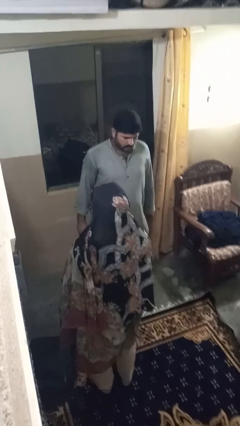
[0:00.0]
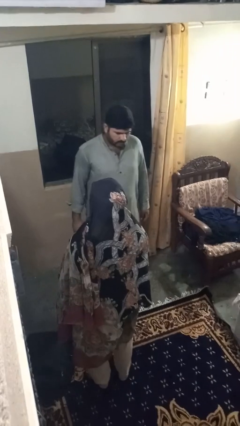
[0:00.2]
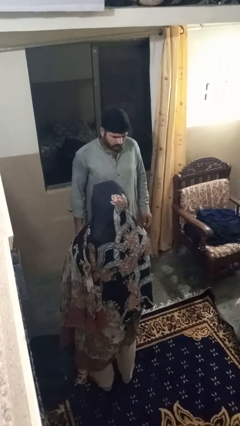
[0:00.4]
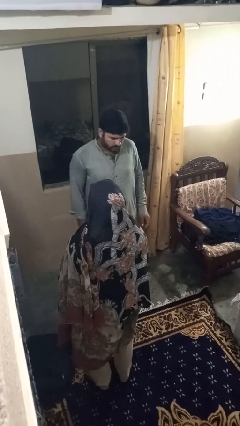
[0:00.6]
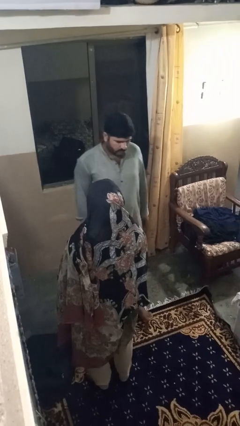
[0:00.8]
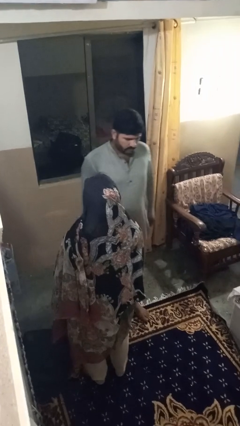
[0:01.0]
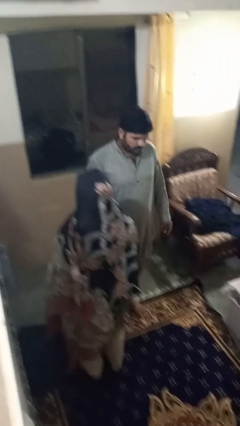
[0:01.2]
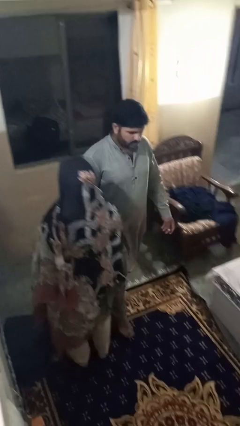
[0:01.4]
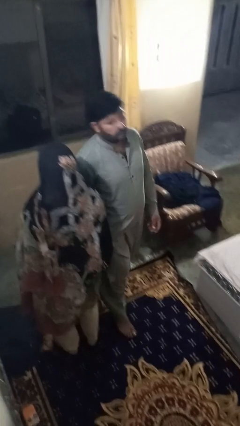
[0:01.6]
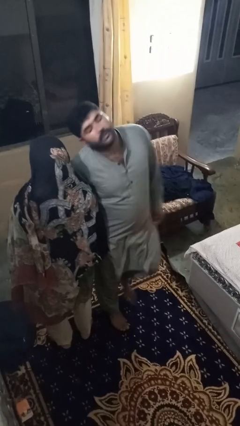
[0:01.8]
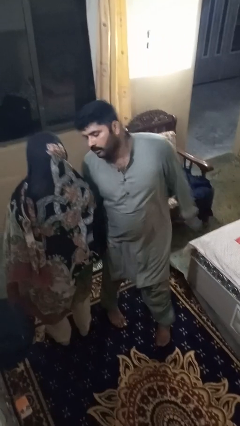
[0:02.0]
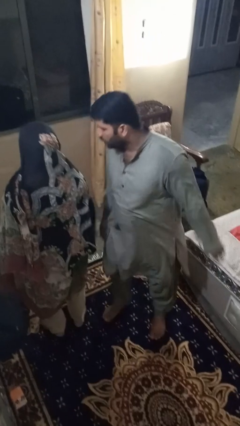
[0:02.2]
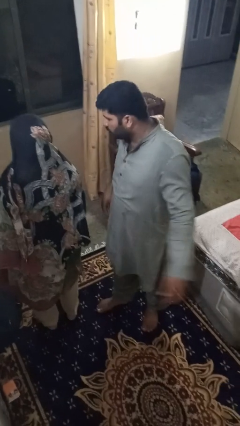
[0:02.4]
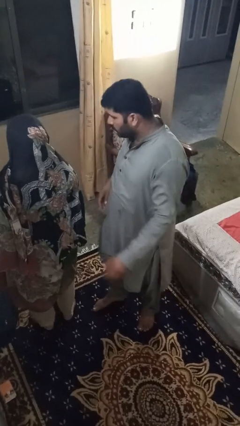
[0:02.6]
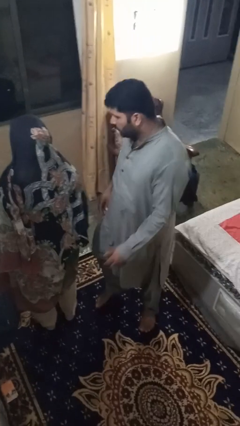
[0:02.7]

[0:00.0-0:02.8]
person bumps into person

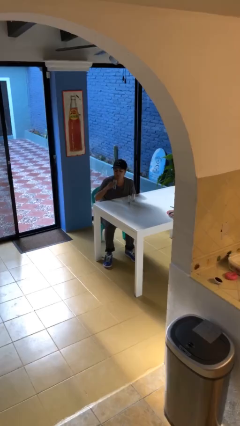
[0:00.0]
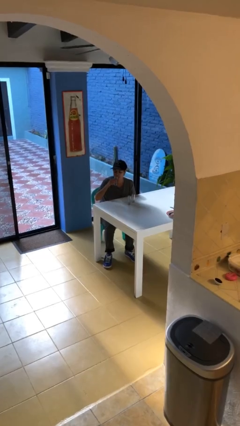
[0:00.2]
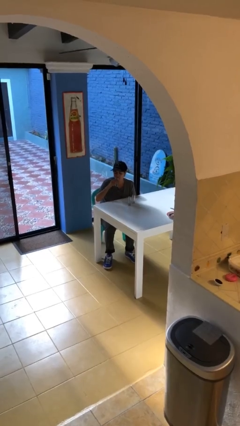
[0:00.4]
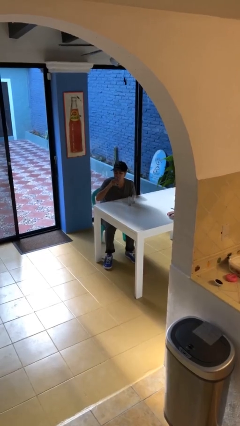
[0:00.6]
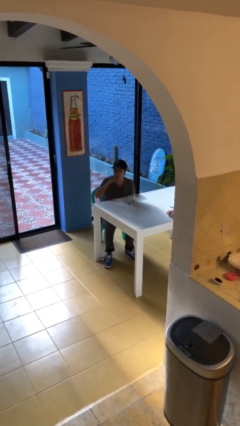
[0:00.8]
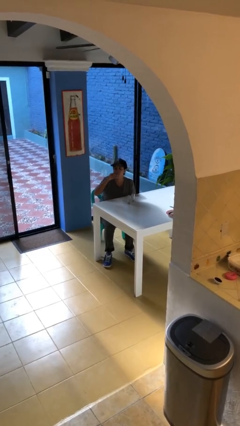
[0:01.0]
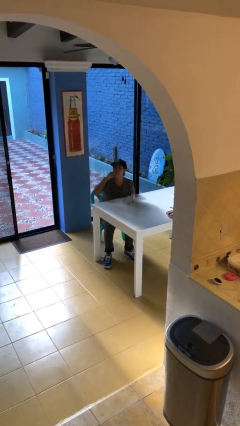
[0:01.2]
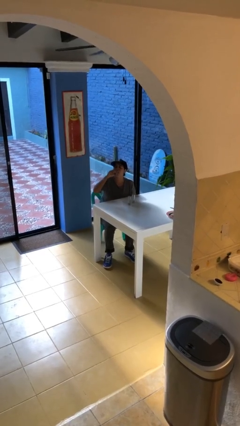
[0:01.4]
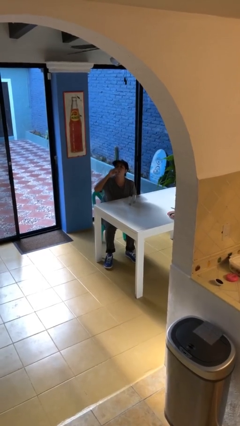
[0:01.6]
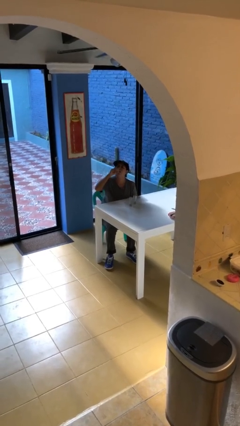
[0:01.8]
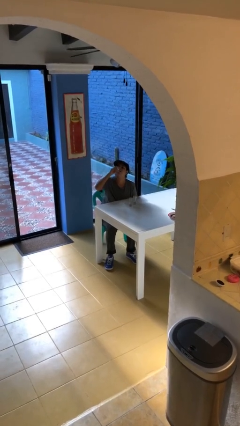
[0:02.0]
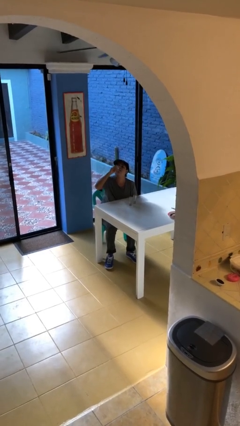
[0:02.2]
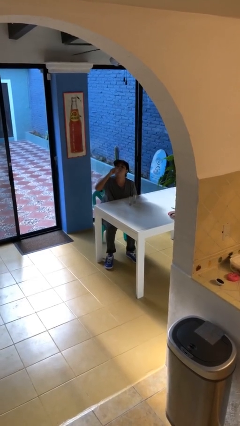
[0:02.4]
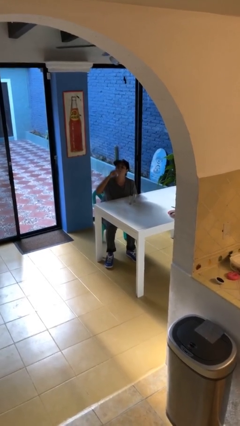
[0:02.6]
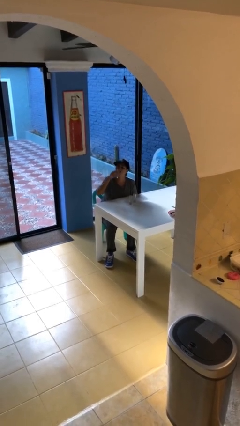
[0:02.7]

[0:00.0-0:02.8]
person drinks from shotglass

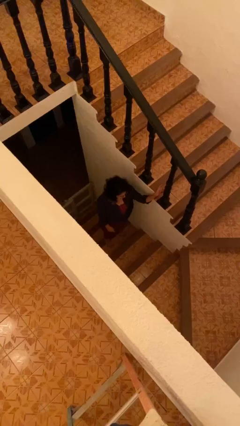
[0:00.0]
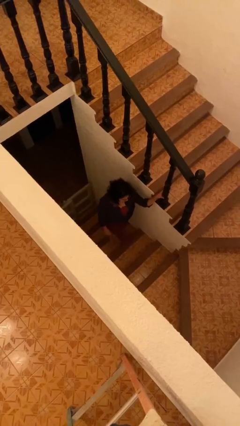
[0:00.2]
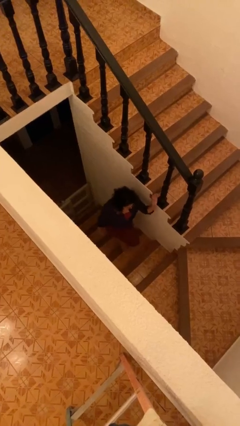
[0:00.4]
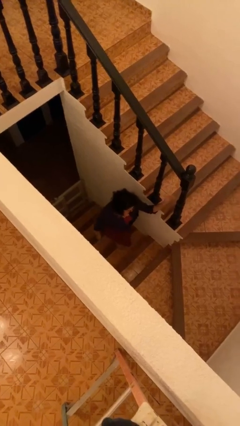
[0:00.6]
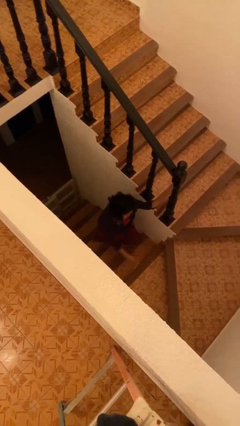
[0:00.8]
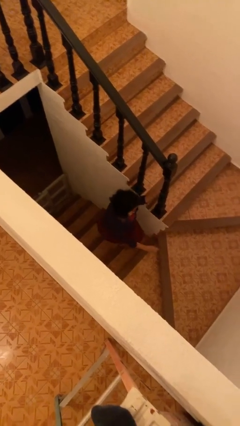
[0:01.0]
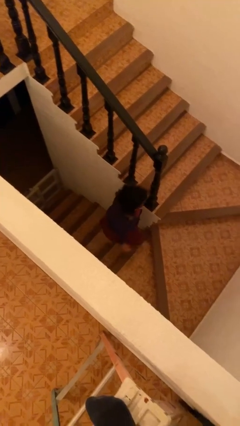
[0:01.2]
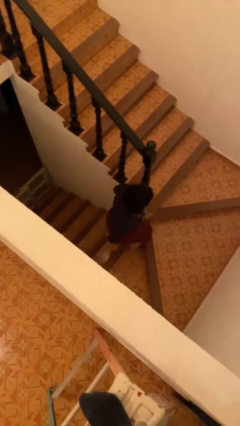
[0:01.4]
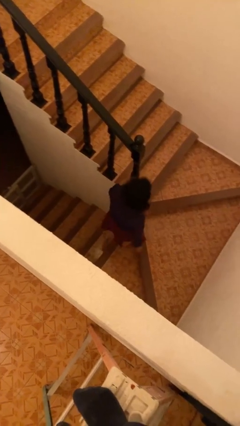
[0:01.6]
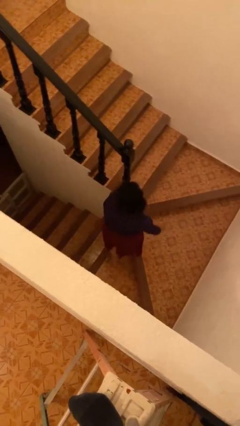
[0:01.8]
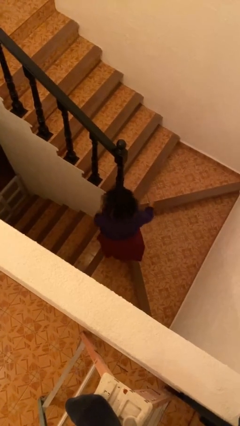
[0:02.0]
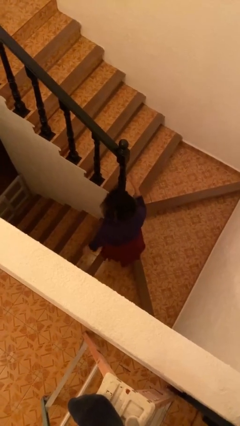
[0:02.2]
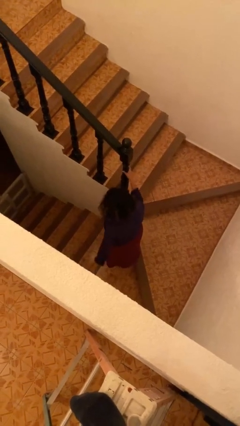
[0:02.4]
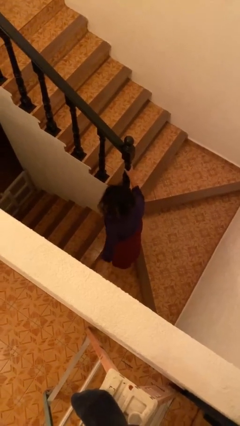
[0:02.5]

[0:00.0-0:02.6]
person climbs up stairs

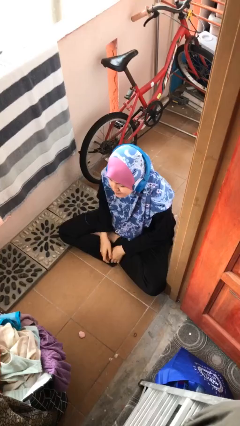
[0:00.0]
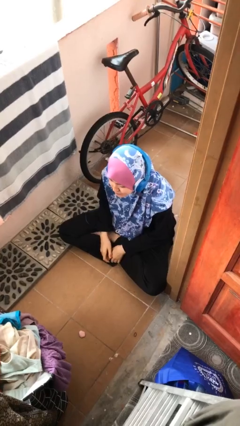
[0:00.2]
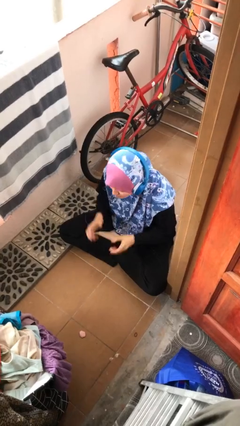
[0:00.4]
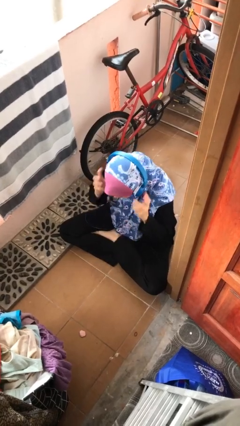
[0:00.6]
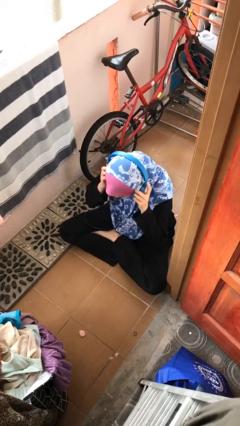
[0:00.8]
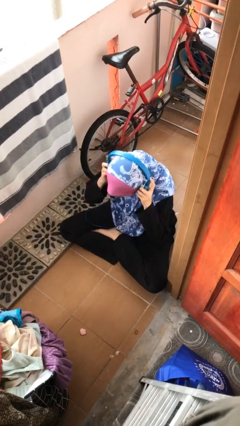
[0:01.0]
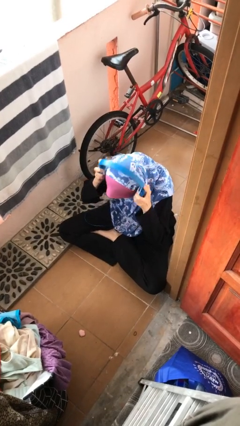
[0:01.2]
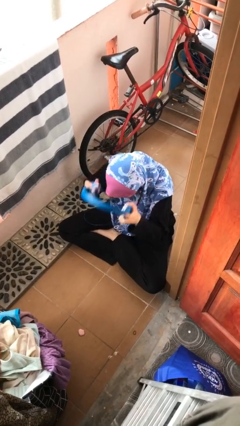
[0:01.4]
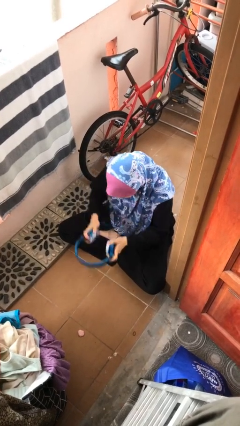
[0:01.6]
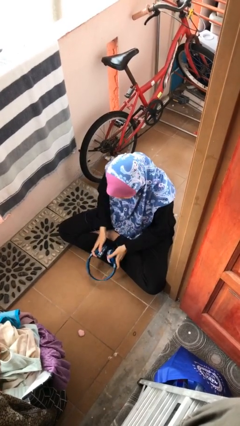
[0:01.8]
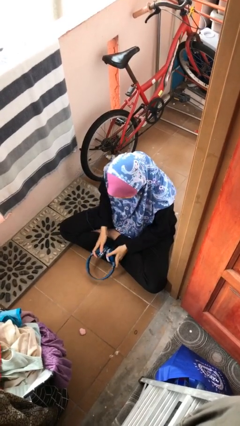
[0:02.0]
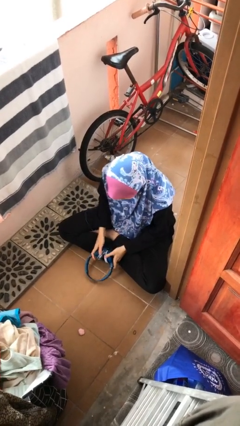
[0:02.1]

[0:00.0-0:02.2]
person takes off headphones

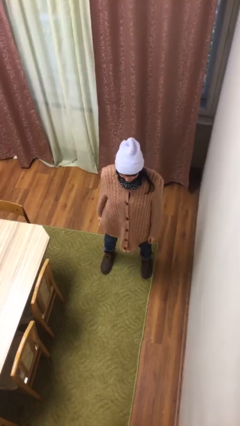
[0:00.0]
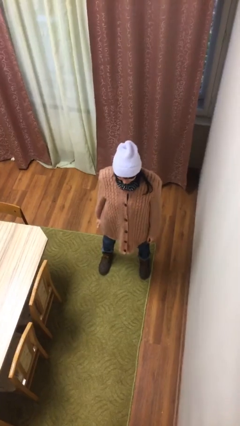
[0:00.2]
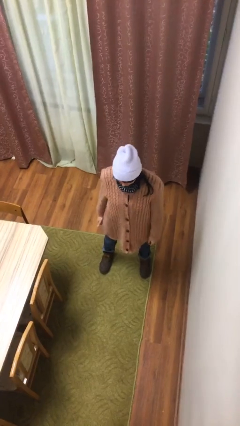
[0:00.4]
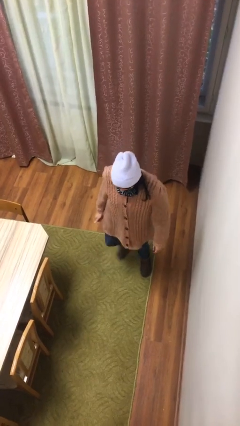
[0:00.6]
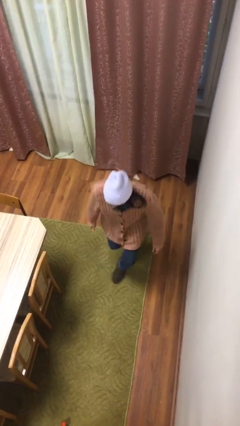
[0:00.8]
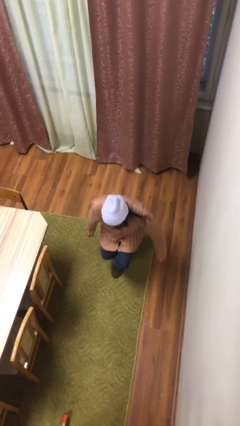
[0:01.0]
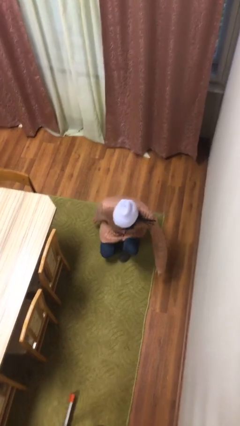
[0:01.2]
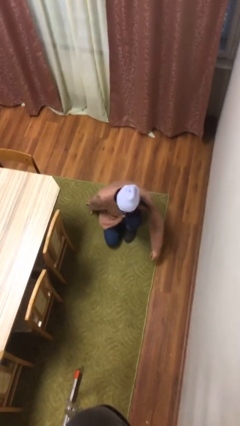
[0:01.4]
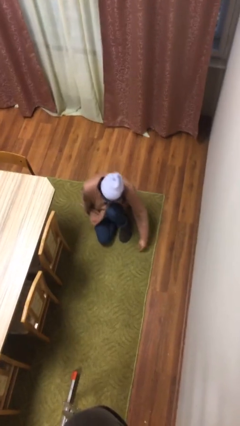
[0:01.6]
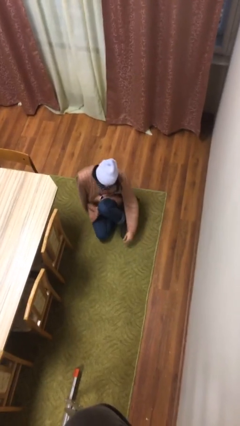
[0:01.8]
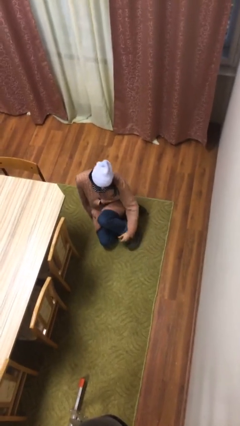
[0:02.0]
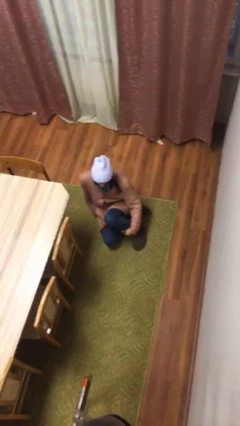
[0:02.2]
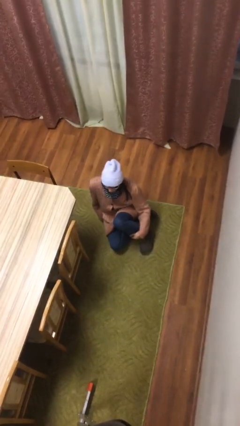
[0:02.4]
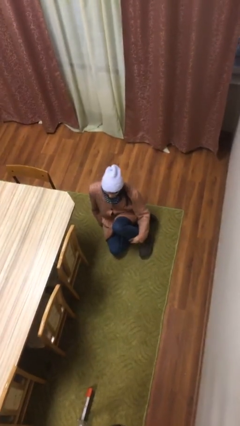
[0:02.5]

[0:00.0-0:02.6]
person sits down

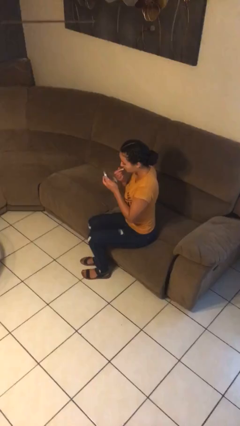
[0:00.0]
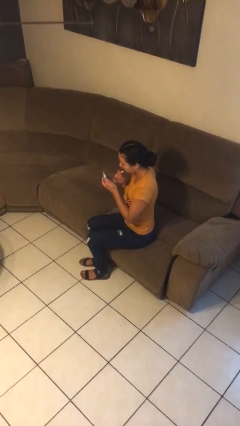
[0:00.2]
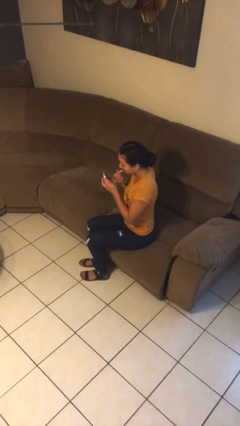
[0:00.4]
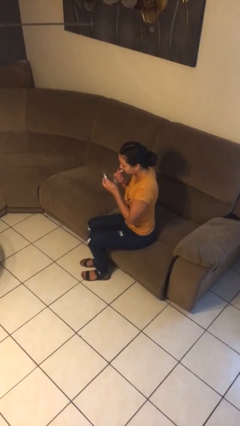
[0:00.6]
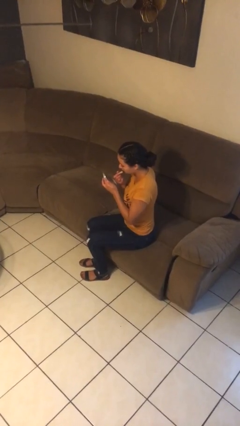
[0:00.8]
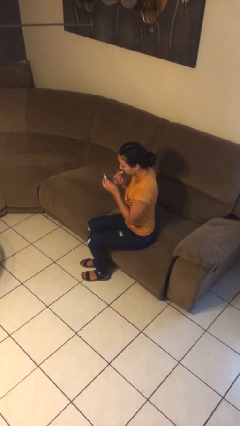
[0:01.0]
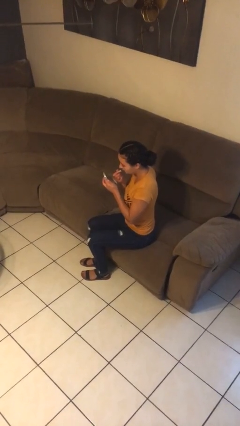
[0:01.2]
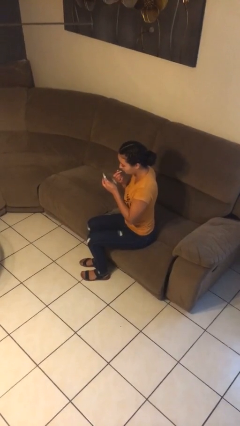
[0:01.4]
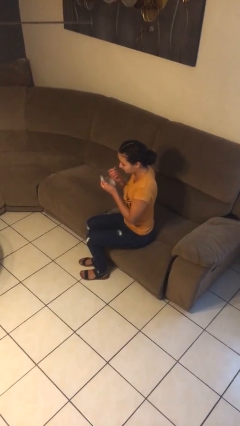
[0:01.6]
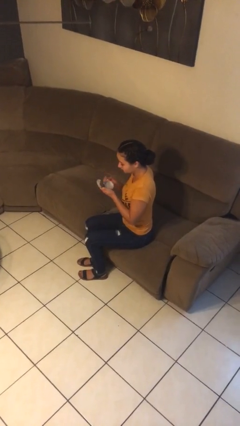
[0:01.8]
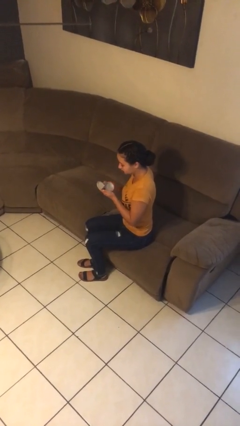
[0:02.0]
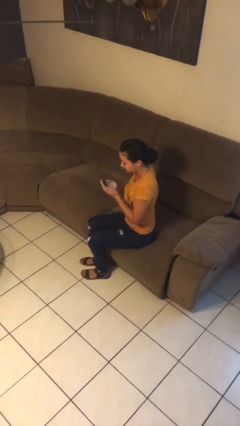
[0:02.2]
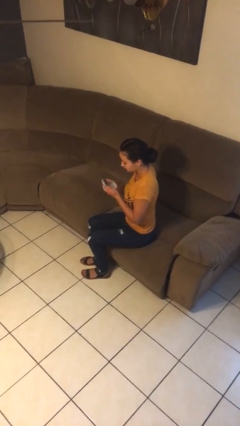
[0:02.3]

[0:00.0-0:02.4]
person applies lip makeup

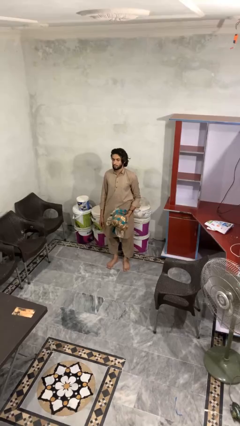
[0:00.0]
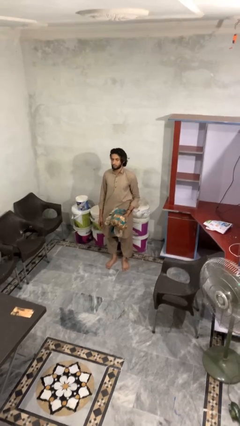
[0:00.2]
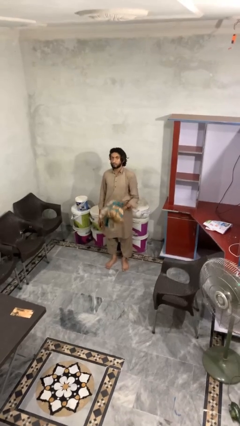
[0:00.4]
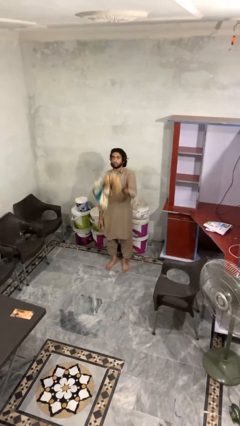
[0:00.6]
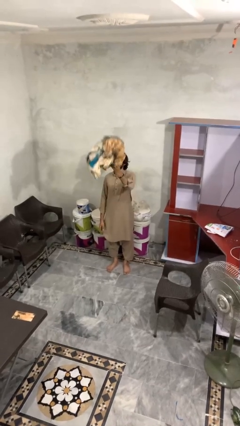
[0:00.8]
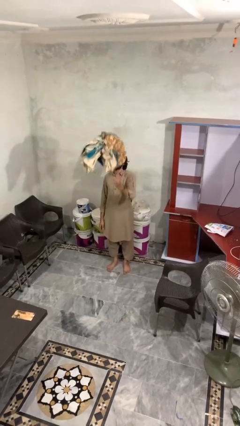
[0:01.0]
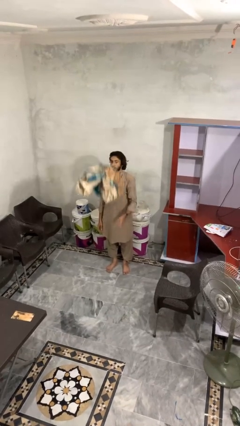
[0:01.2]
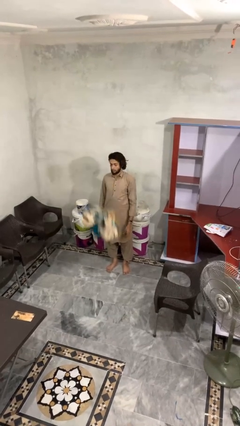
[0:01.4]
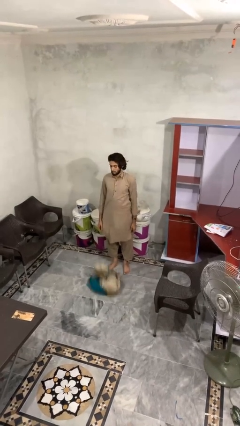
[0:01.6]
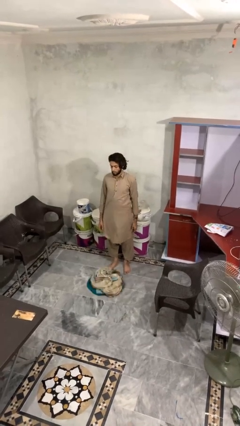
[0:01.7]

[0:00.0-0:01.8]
person throws object into air
